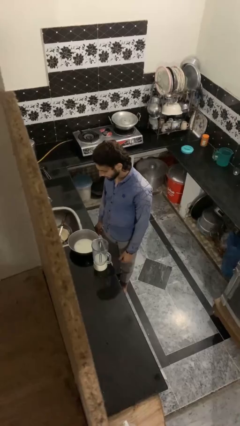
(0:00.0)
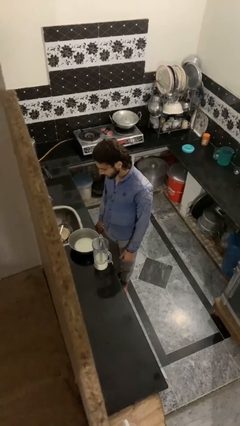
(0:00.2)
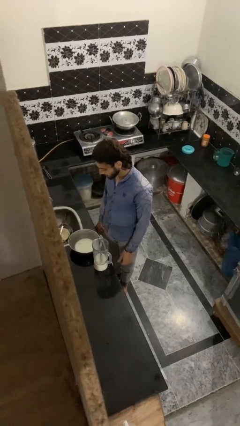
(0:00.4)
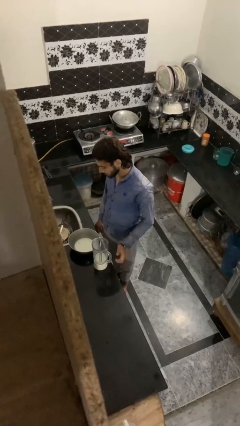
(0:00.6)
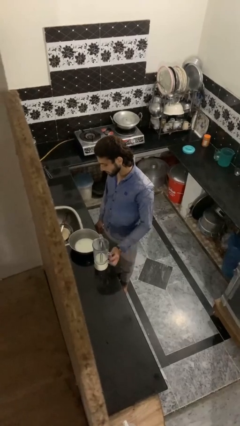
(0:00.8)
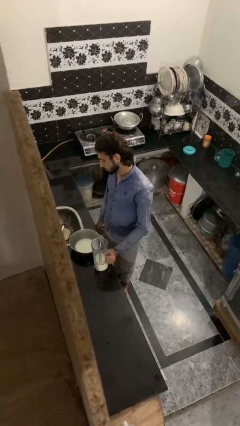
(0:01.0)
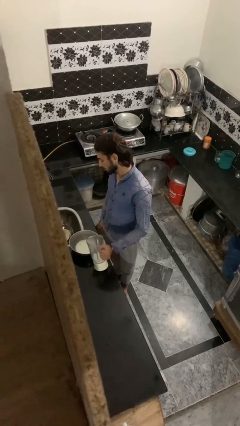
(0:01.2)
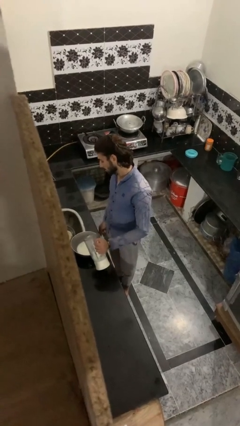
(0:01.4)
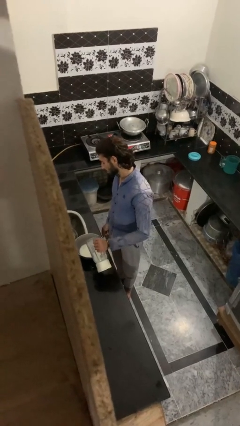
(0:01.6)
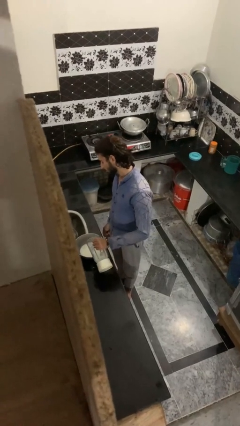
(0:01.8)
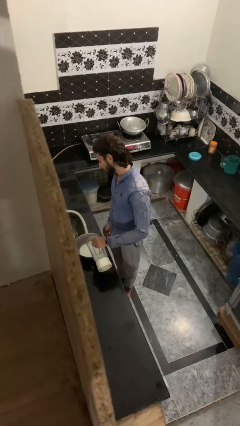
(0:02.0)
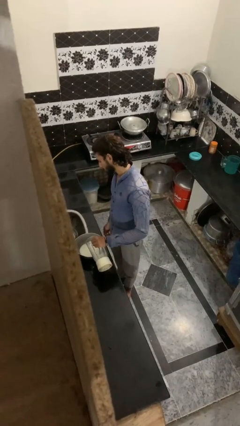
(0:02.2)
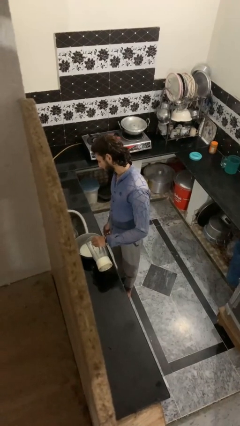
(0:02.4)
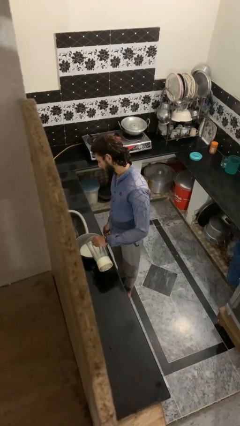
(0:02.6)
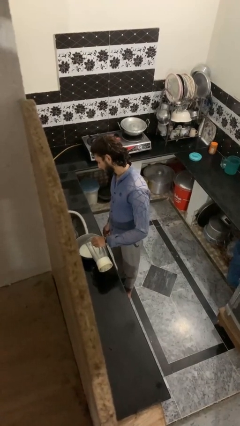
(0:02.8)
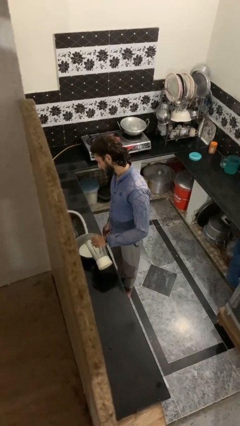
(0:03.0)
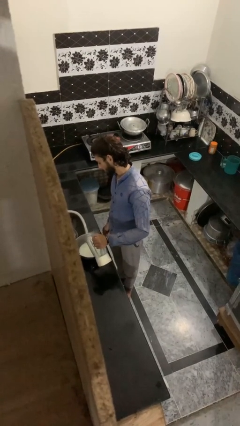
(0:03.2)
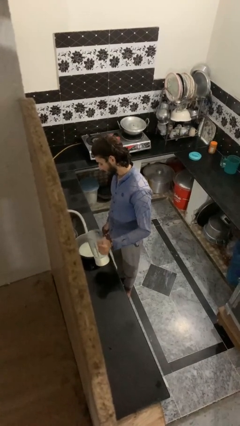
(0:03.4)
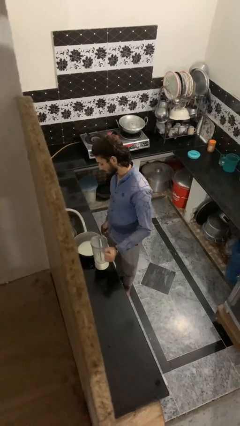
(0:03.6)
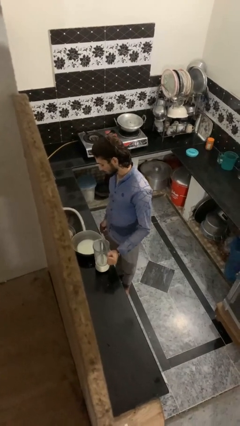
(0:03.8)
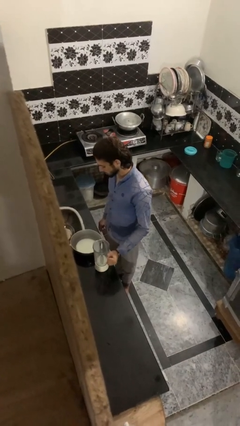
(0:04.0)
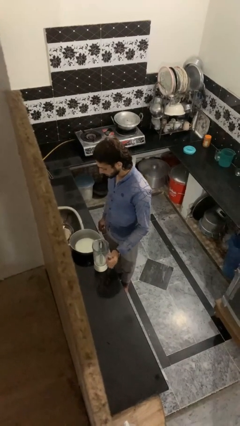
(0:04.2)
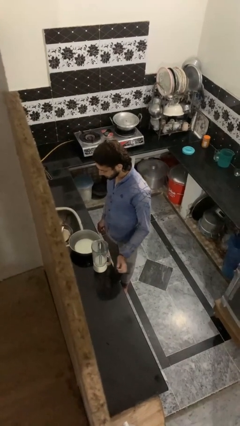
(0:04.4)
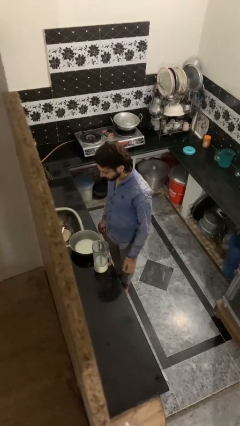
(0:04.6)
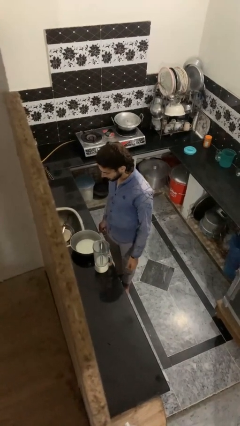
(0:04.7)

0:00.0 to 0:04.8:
person pours into bowl

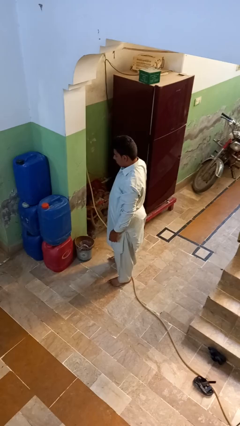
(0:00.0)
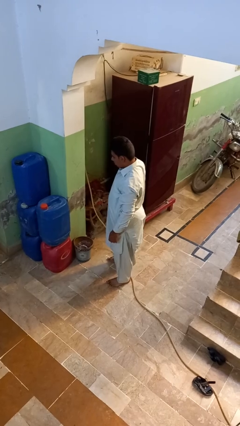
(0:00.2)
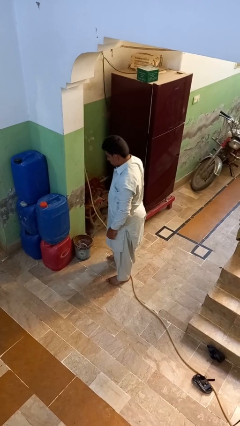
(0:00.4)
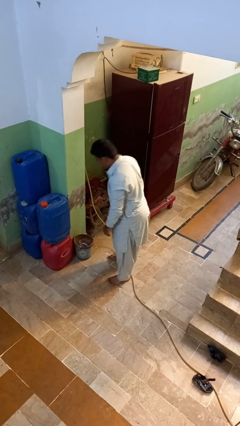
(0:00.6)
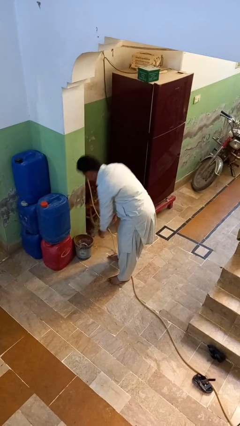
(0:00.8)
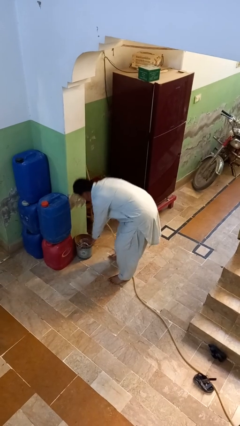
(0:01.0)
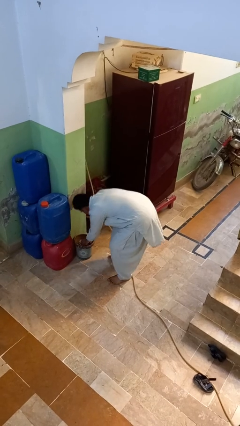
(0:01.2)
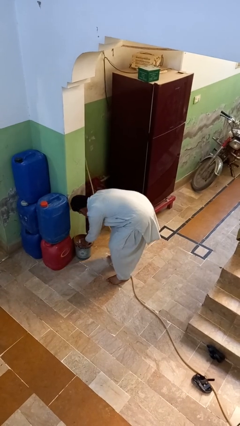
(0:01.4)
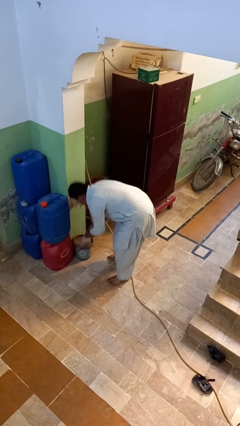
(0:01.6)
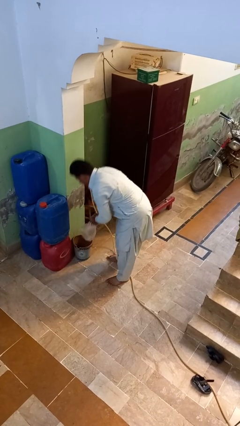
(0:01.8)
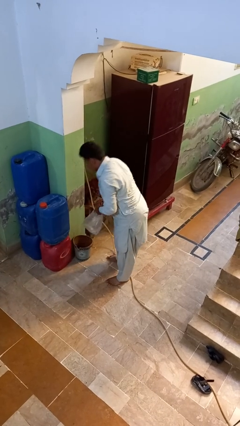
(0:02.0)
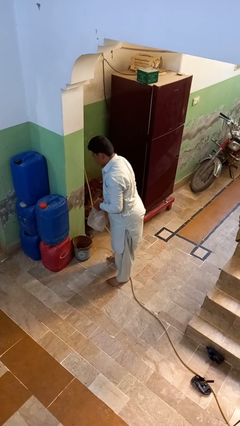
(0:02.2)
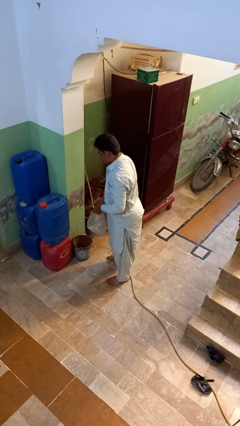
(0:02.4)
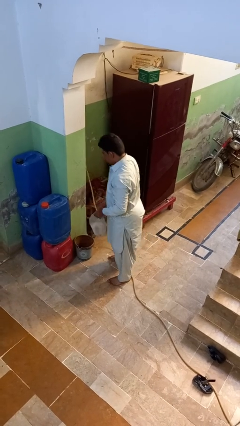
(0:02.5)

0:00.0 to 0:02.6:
person removes trashbag from trashcan

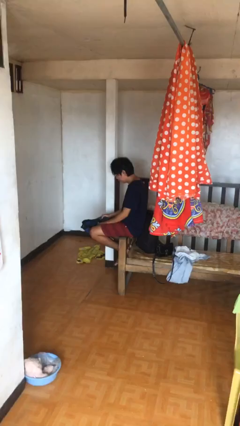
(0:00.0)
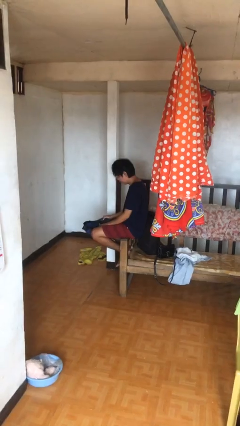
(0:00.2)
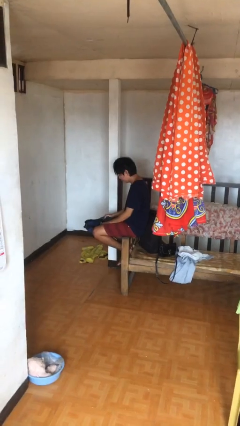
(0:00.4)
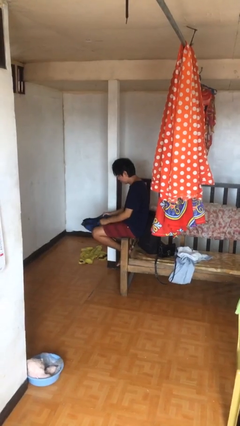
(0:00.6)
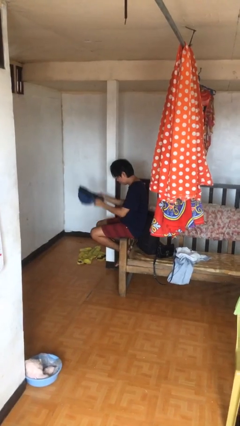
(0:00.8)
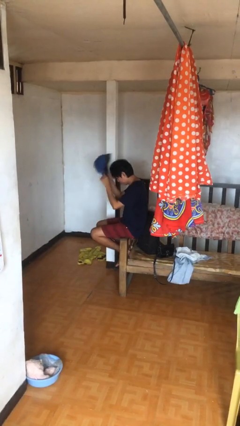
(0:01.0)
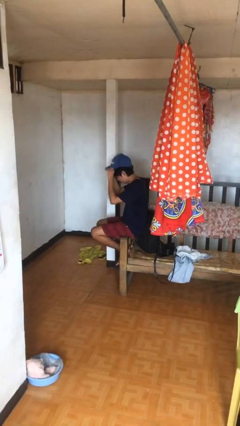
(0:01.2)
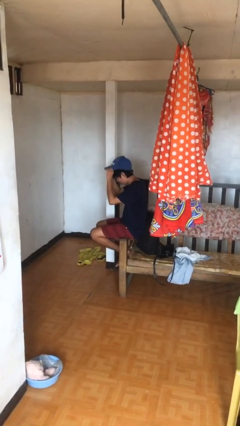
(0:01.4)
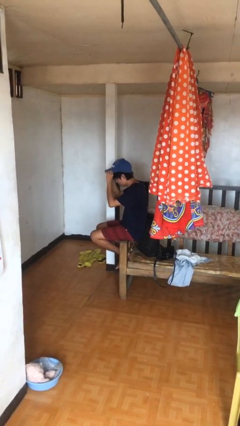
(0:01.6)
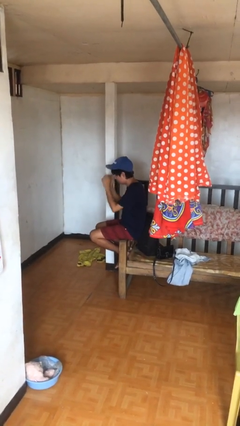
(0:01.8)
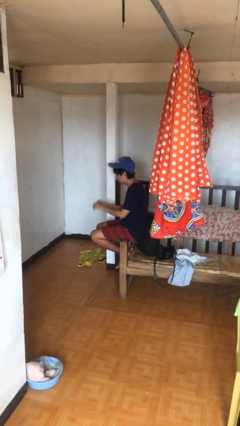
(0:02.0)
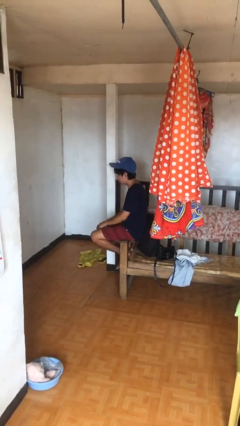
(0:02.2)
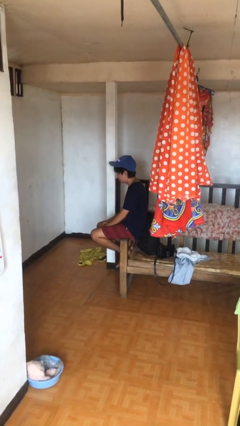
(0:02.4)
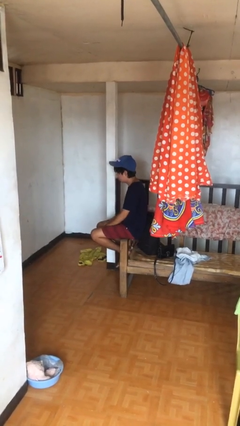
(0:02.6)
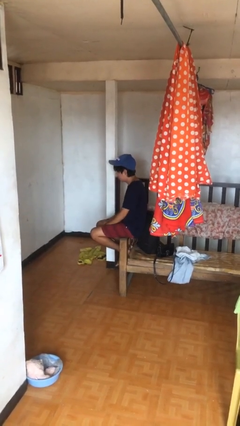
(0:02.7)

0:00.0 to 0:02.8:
person puts on hat

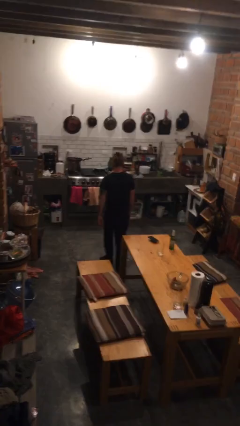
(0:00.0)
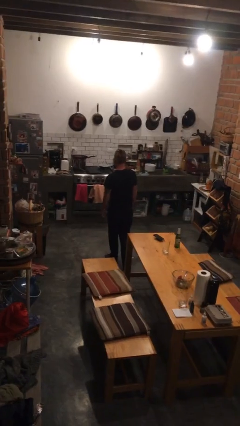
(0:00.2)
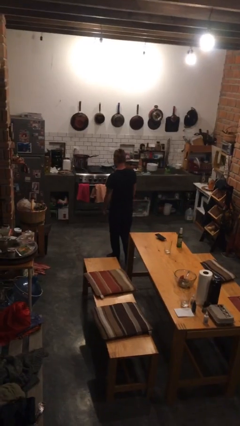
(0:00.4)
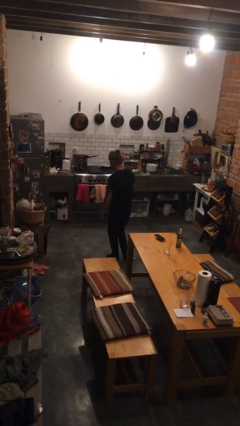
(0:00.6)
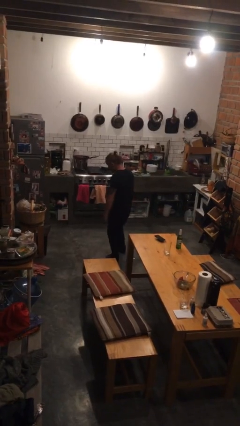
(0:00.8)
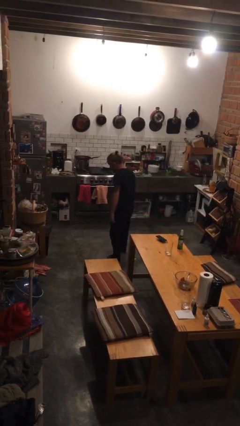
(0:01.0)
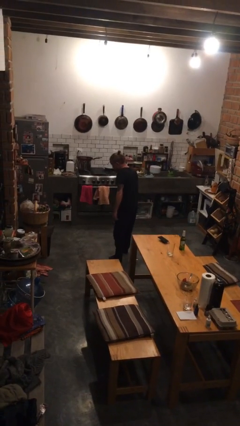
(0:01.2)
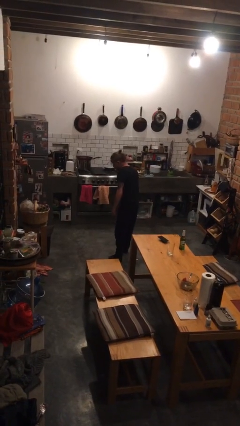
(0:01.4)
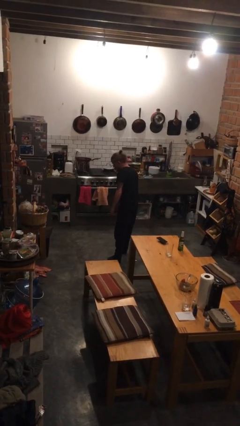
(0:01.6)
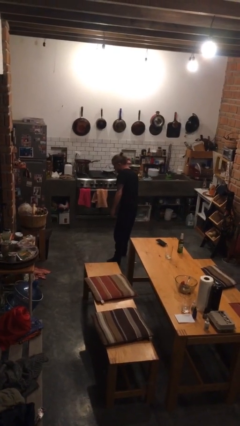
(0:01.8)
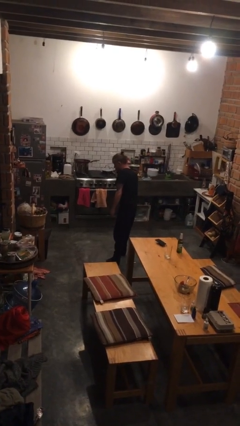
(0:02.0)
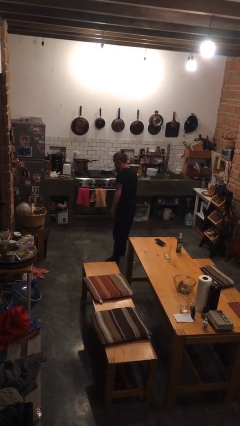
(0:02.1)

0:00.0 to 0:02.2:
person gestures listen closely

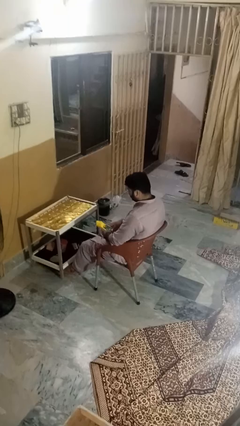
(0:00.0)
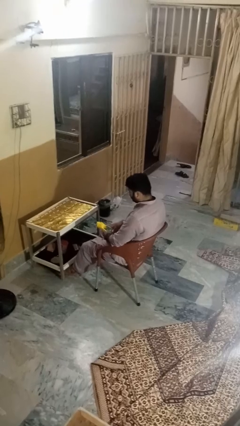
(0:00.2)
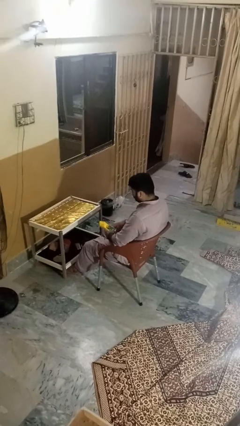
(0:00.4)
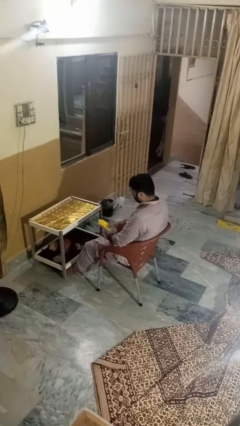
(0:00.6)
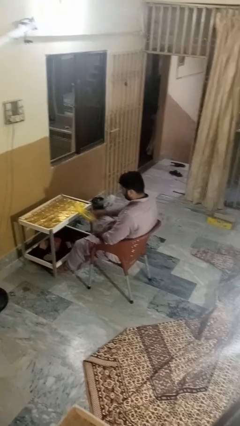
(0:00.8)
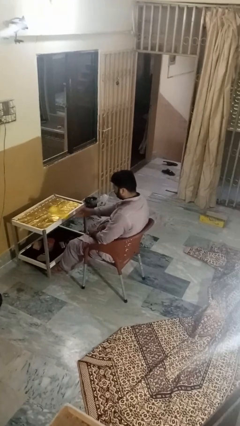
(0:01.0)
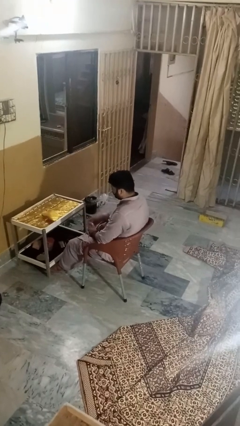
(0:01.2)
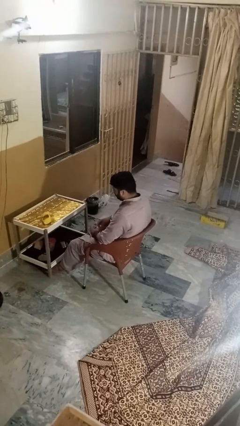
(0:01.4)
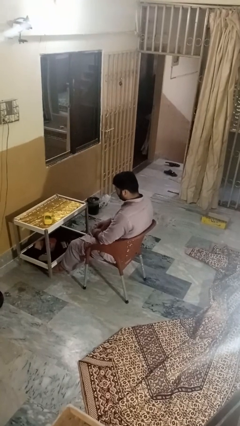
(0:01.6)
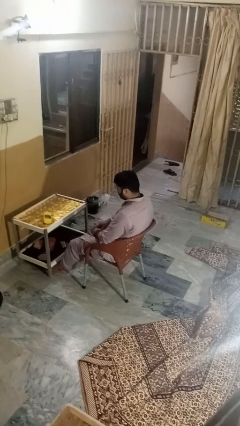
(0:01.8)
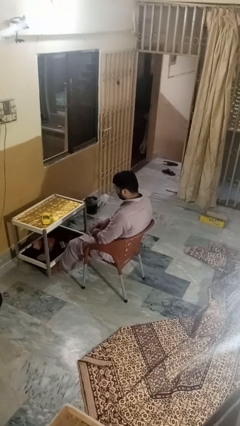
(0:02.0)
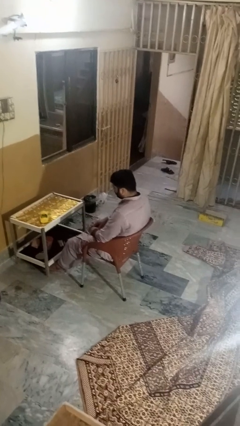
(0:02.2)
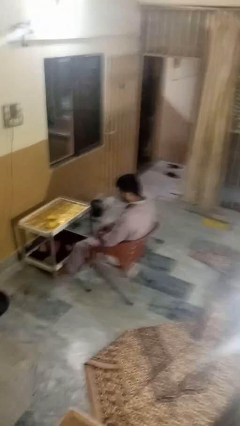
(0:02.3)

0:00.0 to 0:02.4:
person throws object on table

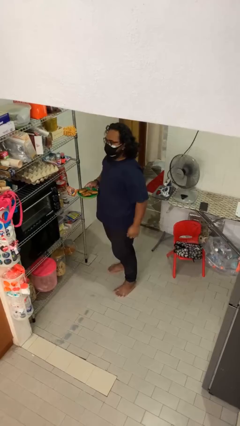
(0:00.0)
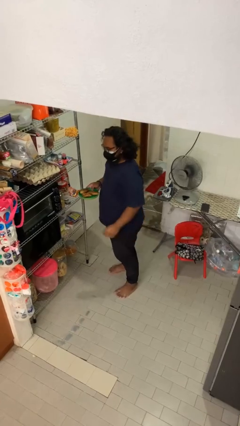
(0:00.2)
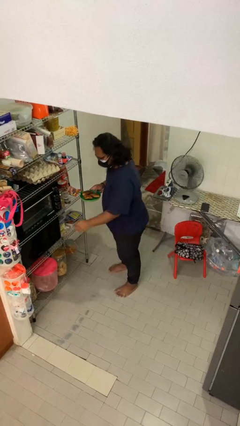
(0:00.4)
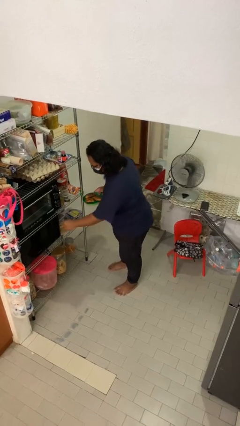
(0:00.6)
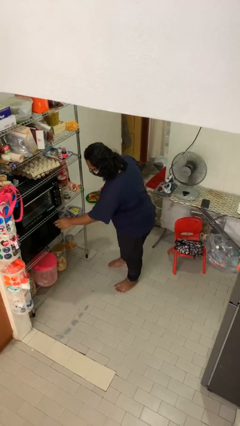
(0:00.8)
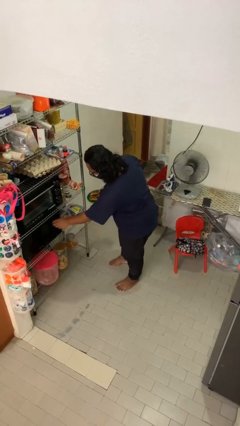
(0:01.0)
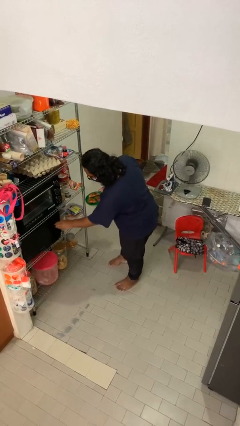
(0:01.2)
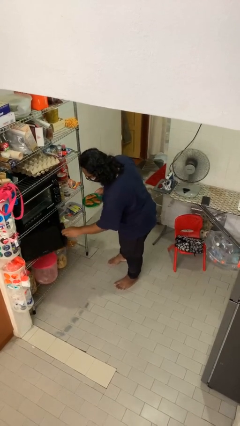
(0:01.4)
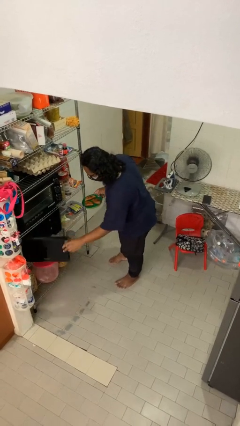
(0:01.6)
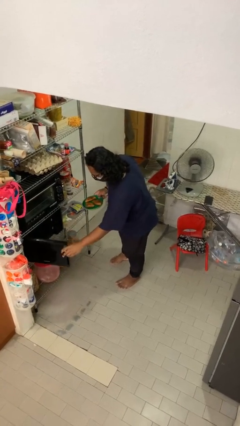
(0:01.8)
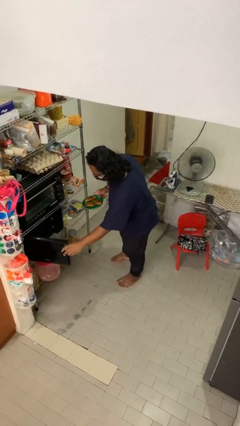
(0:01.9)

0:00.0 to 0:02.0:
person opens microwave

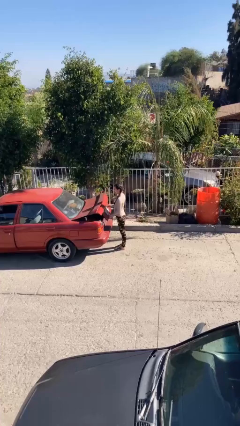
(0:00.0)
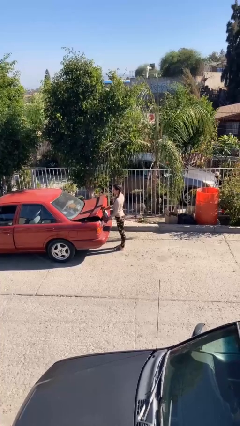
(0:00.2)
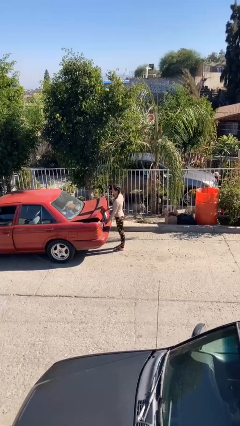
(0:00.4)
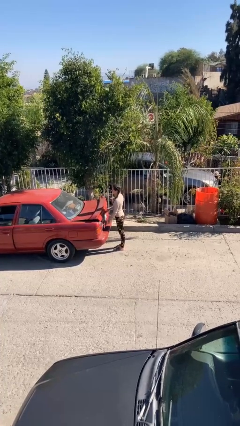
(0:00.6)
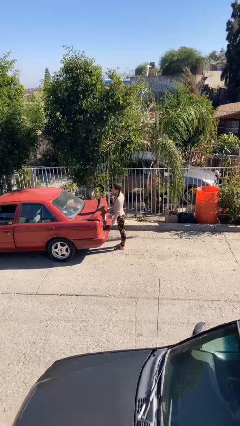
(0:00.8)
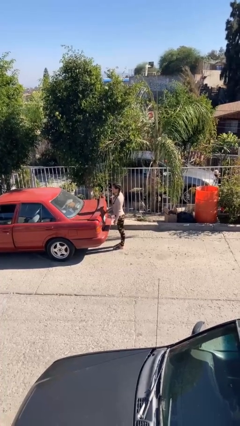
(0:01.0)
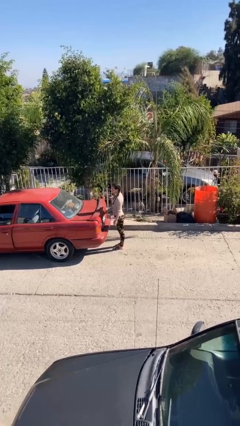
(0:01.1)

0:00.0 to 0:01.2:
person closes car trunk
